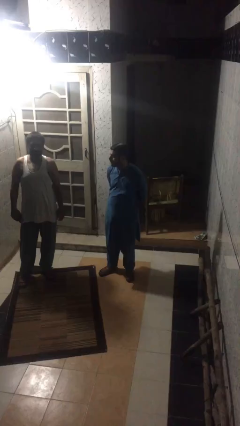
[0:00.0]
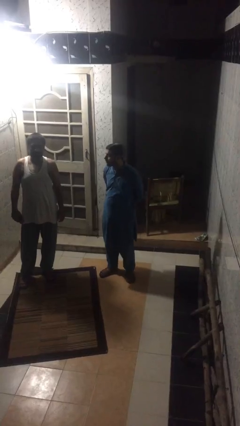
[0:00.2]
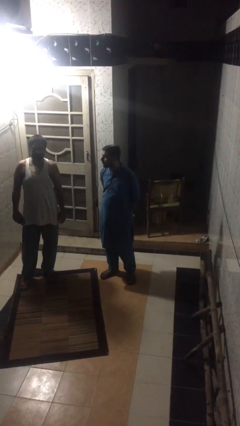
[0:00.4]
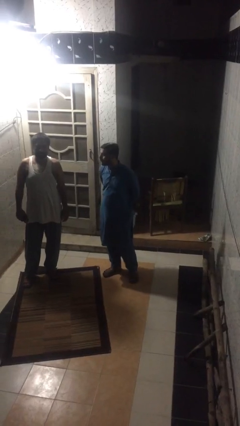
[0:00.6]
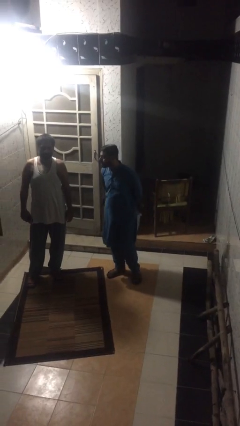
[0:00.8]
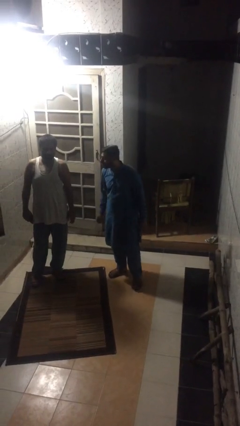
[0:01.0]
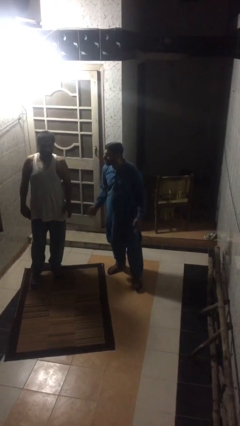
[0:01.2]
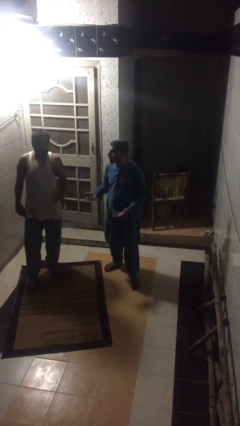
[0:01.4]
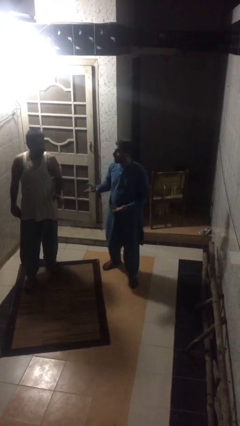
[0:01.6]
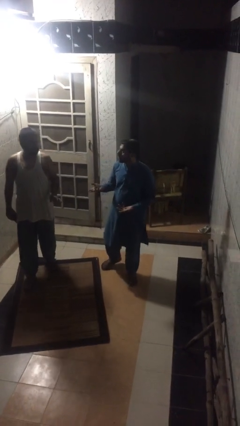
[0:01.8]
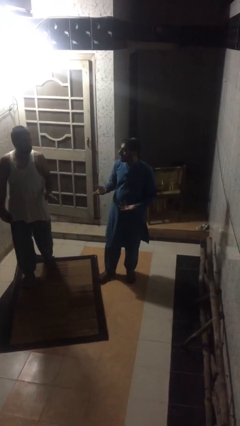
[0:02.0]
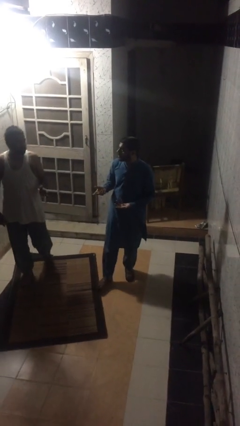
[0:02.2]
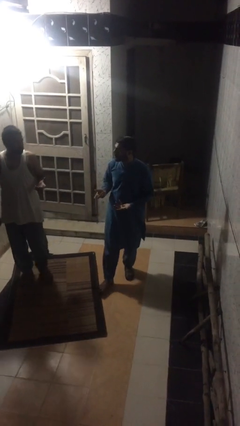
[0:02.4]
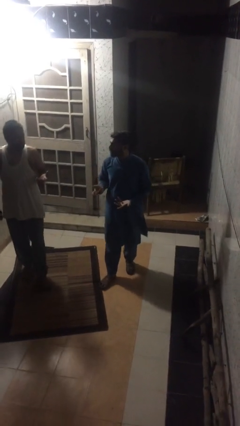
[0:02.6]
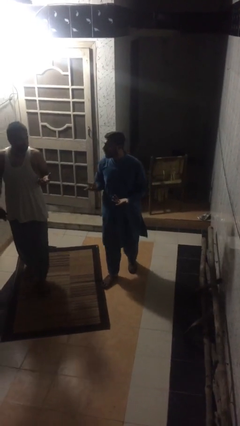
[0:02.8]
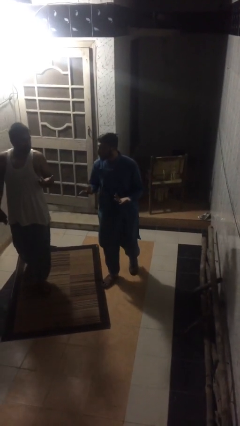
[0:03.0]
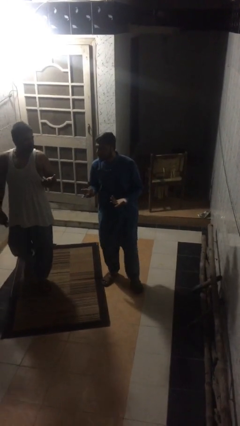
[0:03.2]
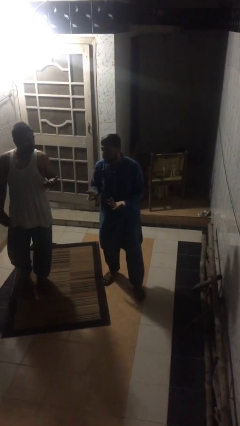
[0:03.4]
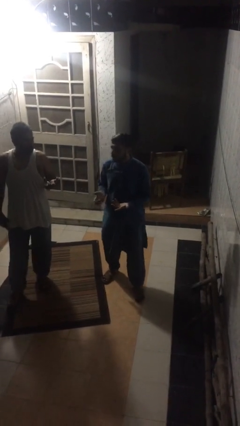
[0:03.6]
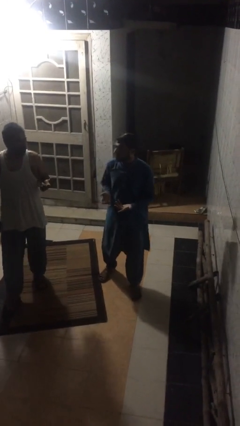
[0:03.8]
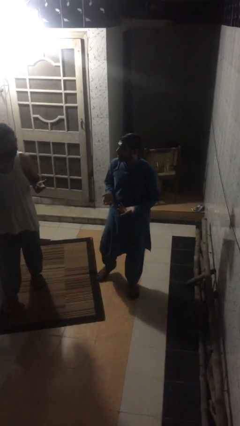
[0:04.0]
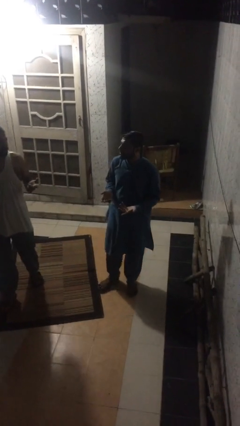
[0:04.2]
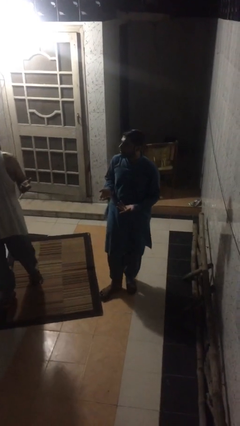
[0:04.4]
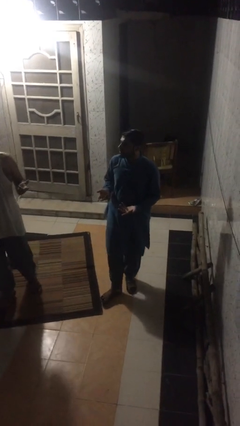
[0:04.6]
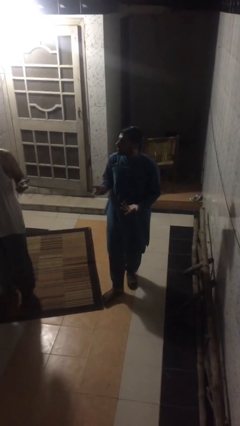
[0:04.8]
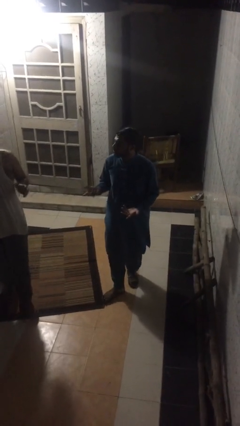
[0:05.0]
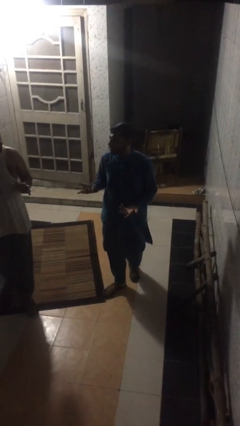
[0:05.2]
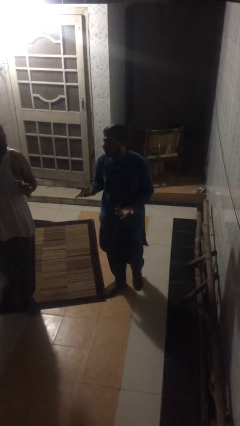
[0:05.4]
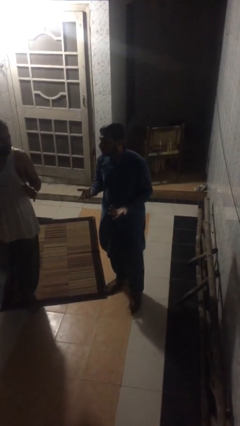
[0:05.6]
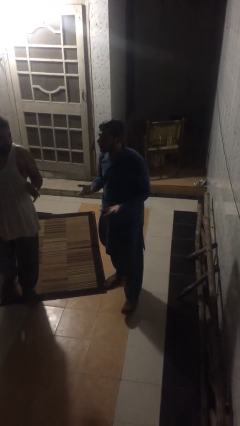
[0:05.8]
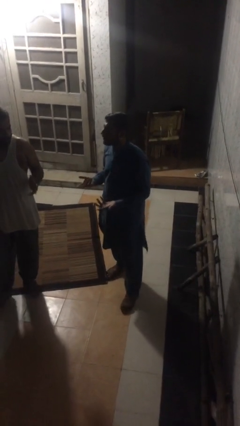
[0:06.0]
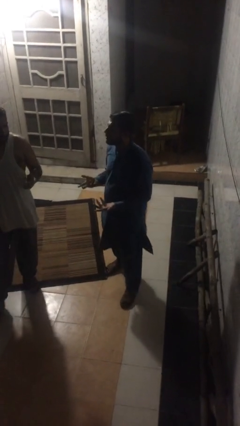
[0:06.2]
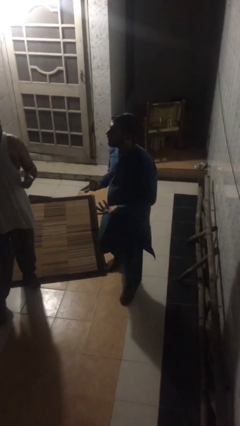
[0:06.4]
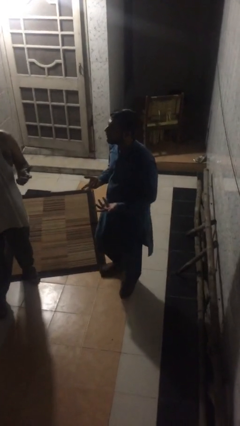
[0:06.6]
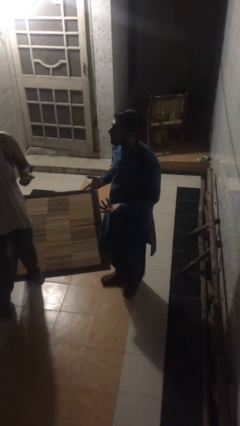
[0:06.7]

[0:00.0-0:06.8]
person talks to person

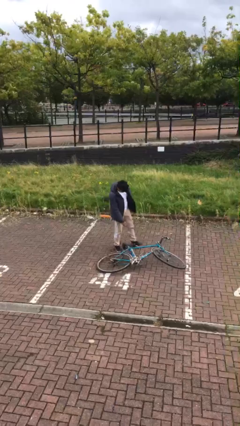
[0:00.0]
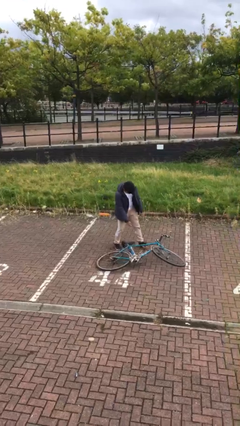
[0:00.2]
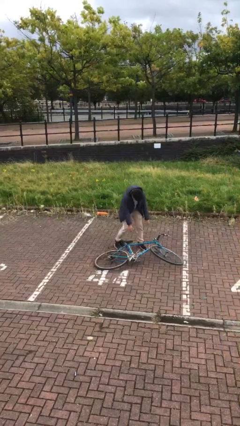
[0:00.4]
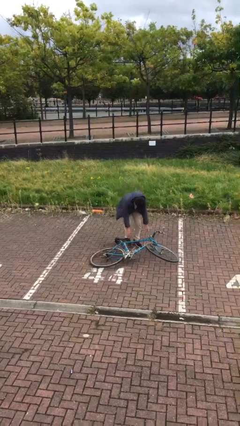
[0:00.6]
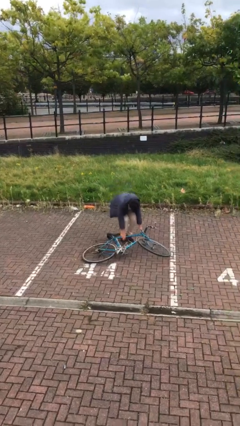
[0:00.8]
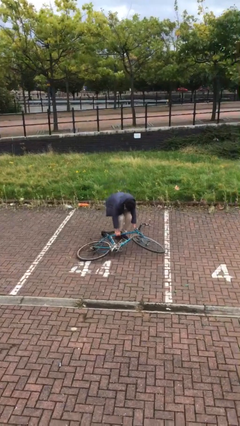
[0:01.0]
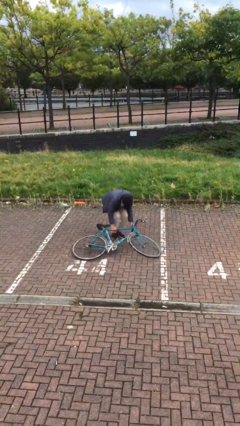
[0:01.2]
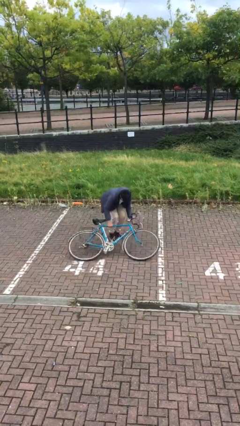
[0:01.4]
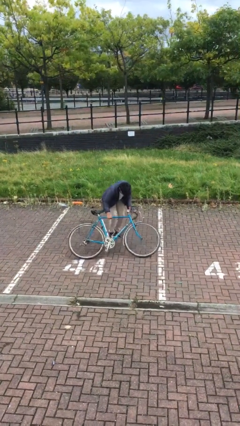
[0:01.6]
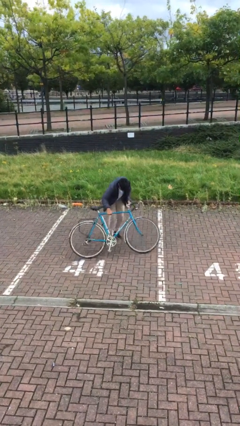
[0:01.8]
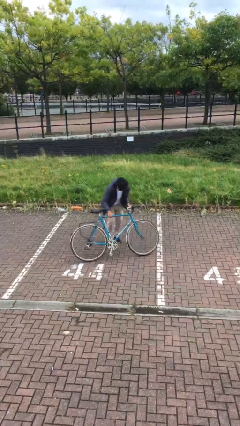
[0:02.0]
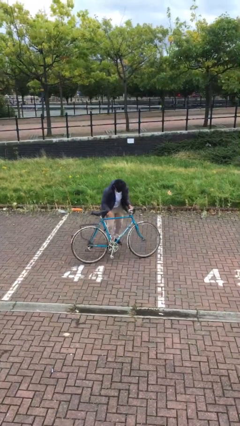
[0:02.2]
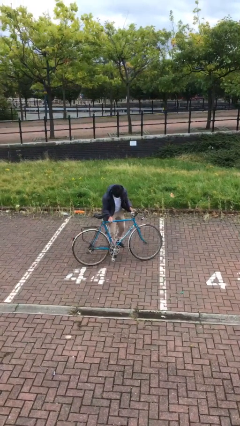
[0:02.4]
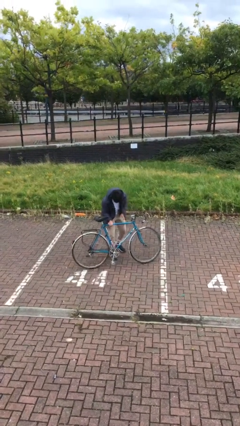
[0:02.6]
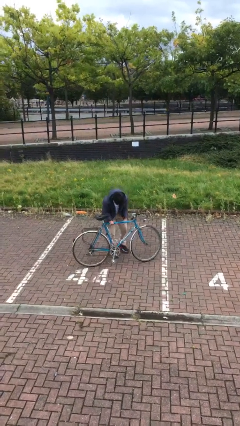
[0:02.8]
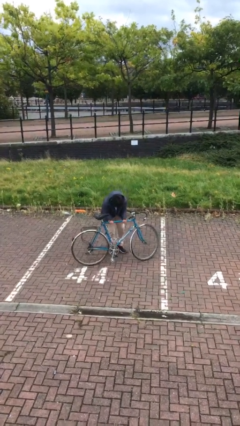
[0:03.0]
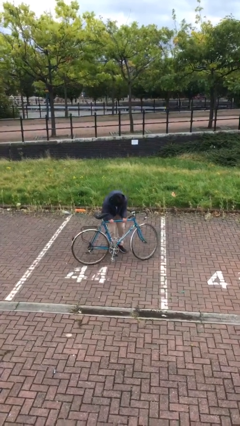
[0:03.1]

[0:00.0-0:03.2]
person picks up object from floor

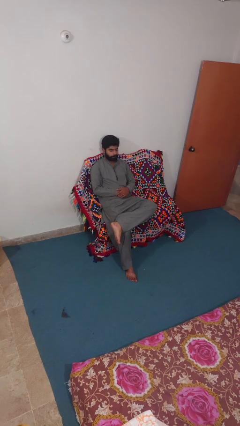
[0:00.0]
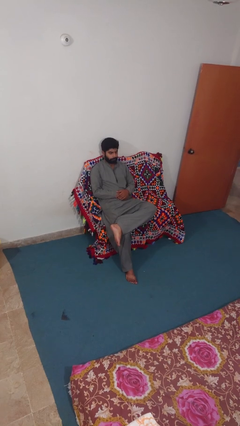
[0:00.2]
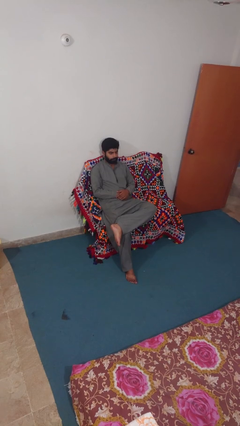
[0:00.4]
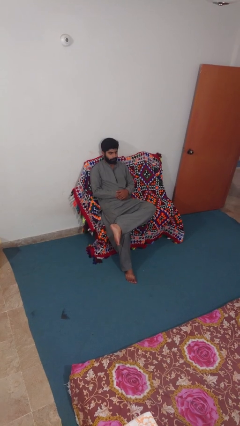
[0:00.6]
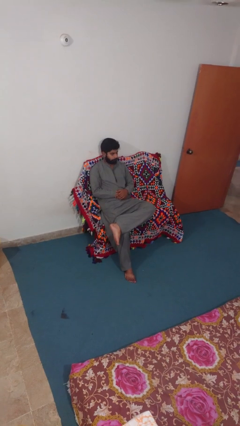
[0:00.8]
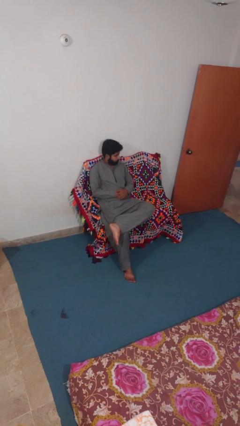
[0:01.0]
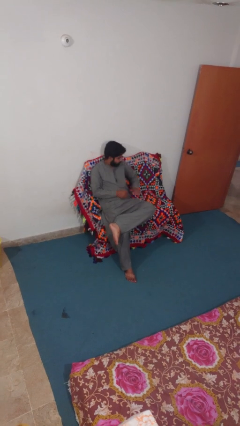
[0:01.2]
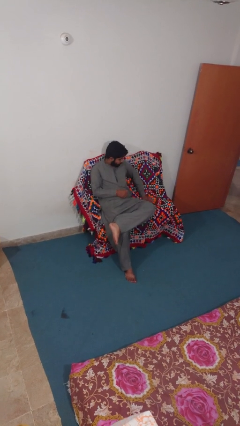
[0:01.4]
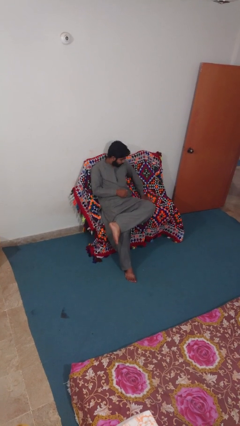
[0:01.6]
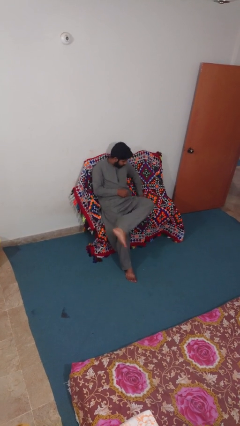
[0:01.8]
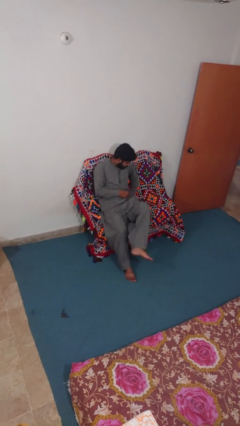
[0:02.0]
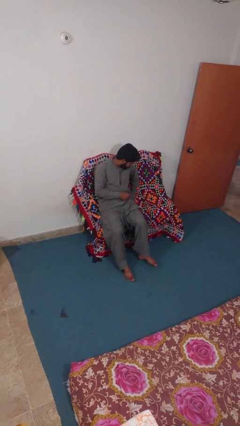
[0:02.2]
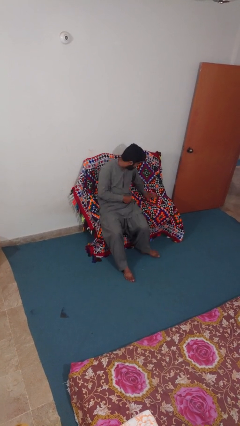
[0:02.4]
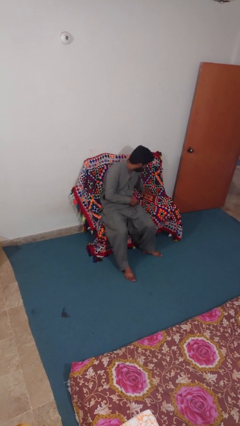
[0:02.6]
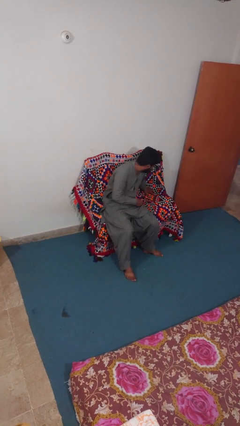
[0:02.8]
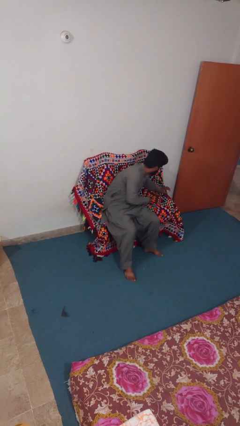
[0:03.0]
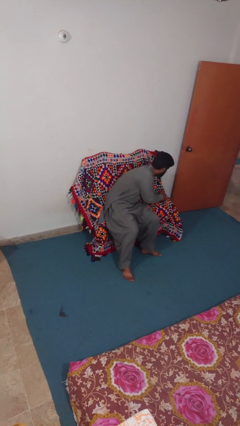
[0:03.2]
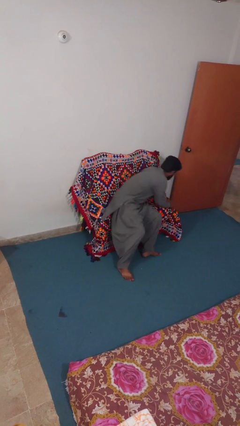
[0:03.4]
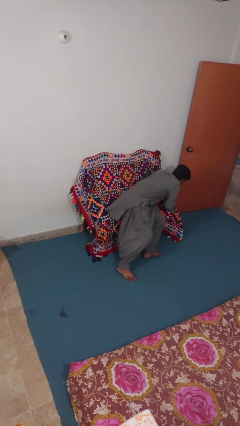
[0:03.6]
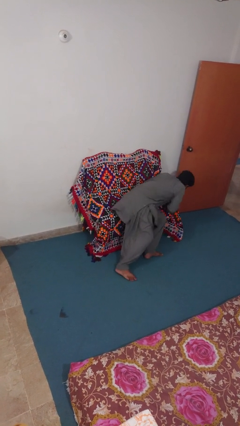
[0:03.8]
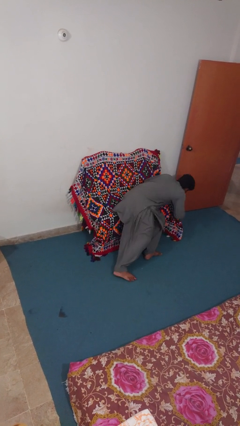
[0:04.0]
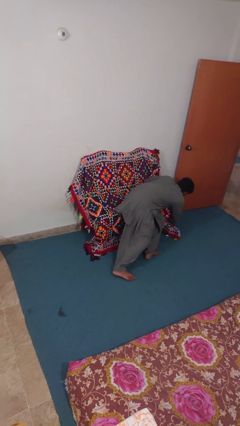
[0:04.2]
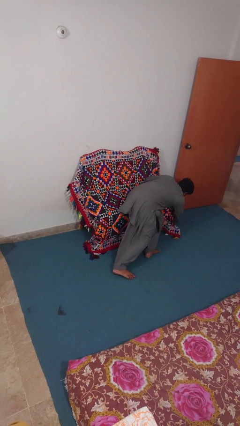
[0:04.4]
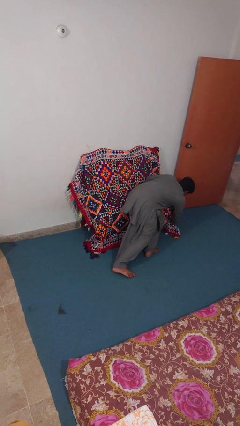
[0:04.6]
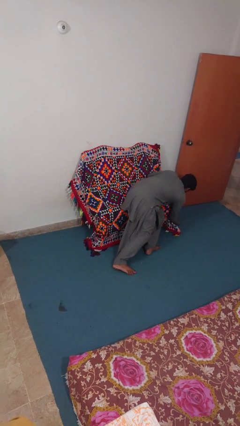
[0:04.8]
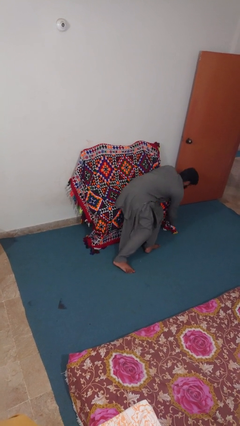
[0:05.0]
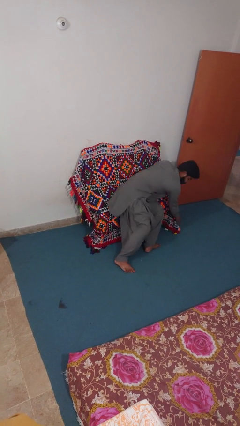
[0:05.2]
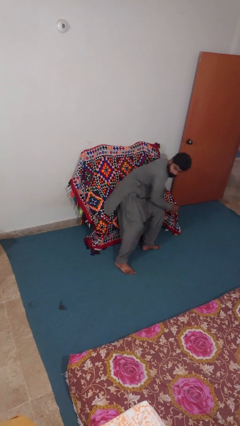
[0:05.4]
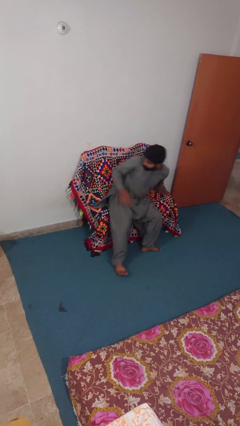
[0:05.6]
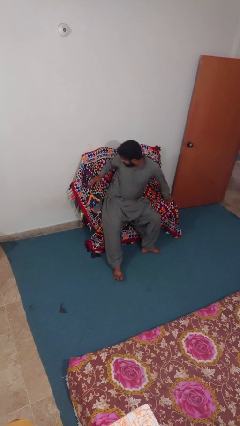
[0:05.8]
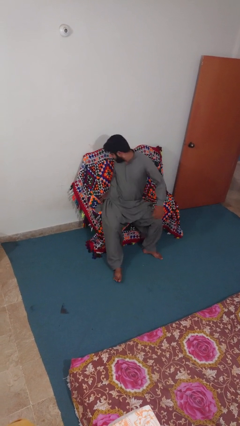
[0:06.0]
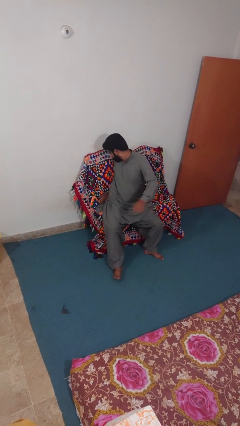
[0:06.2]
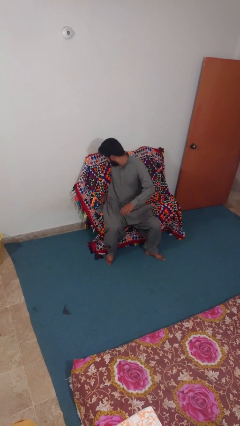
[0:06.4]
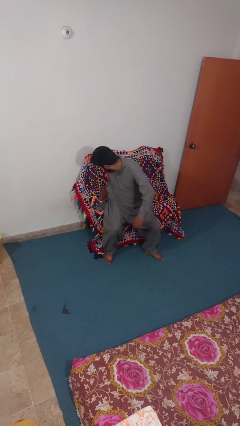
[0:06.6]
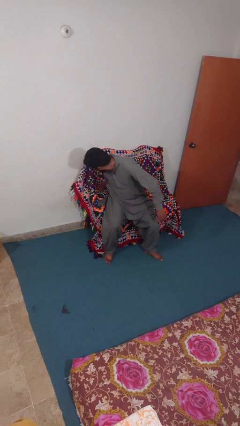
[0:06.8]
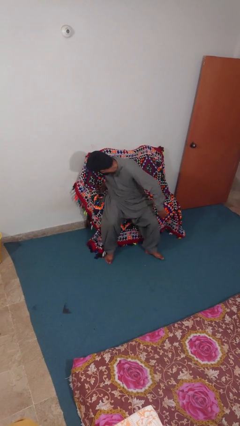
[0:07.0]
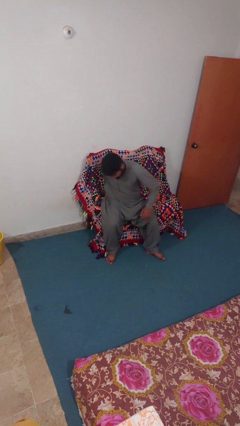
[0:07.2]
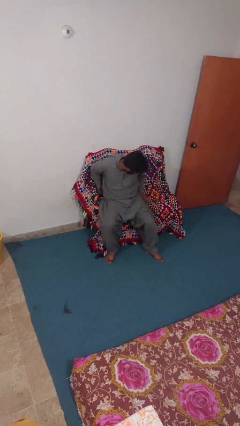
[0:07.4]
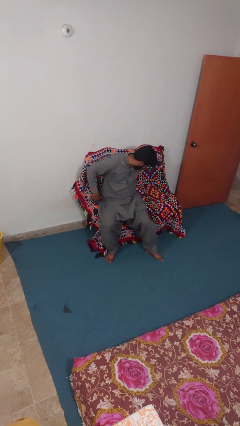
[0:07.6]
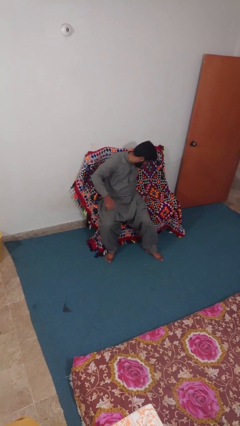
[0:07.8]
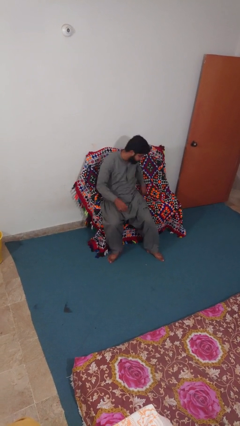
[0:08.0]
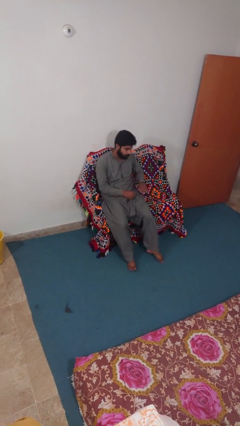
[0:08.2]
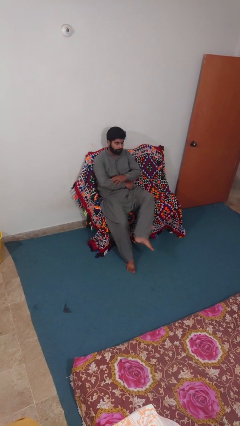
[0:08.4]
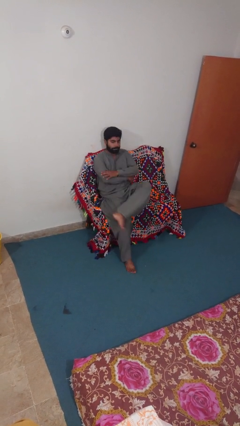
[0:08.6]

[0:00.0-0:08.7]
person searches in couch
